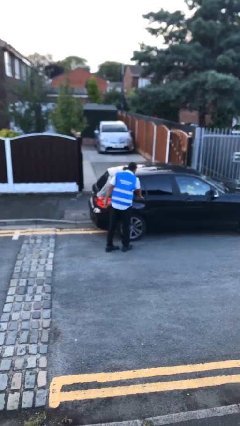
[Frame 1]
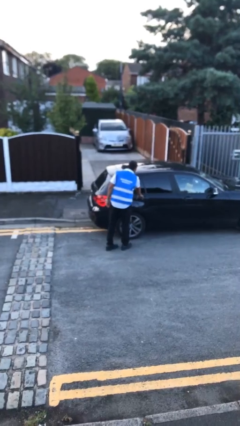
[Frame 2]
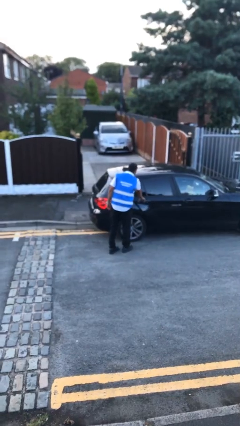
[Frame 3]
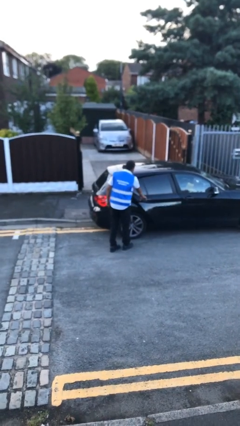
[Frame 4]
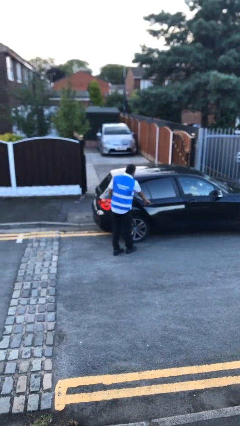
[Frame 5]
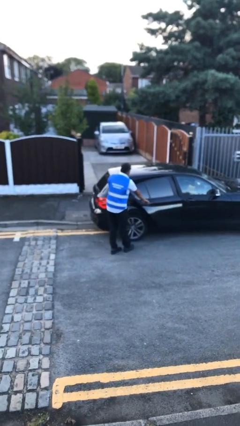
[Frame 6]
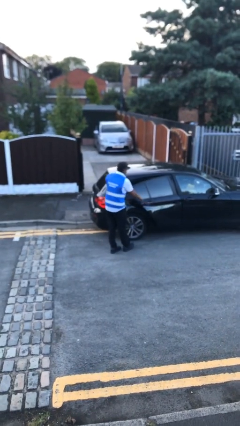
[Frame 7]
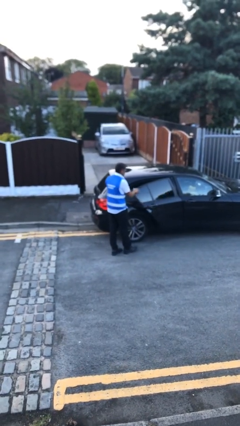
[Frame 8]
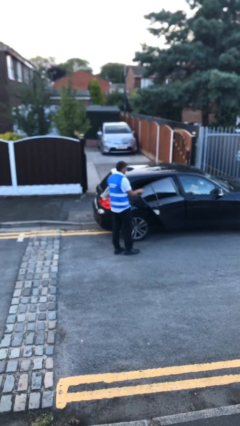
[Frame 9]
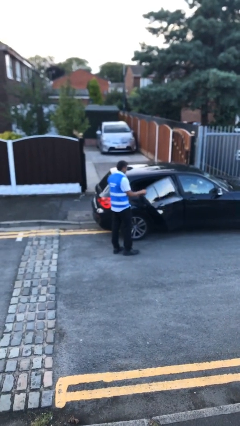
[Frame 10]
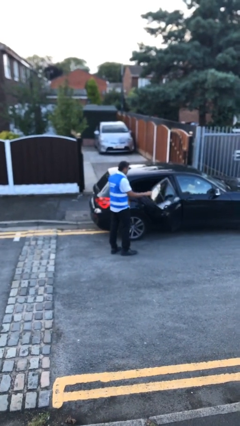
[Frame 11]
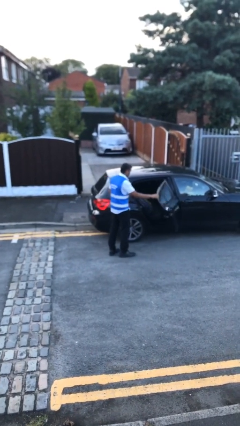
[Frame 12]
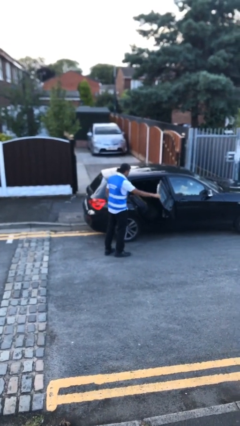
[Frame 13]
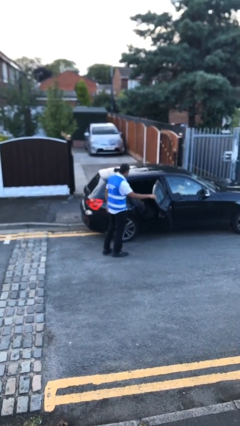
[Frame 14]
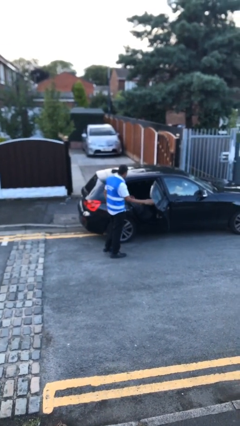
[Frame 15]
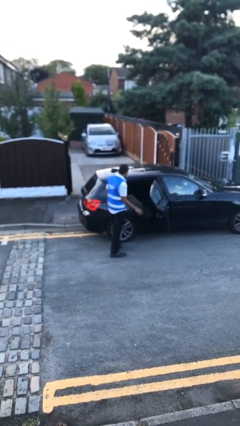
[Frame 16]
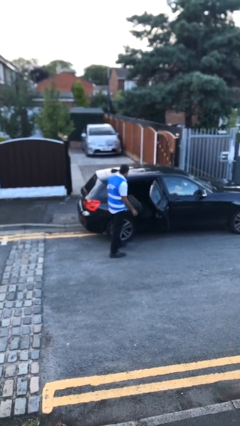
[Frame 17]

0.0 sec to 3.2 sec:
person opens car door

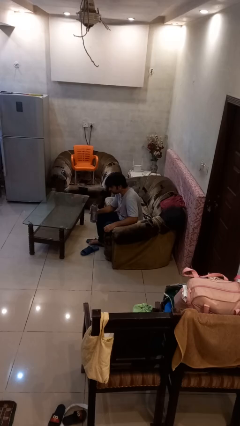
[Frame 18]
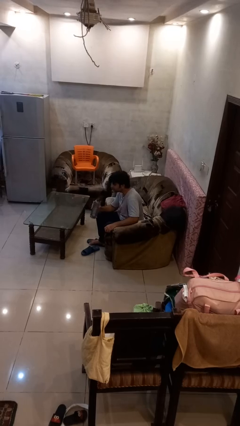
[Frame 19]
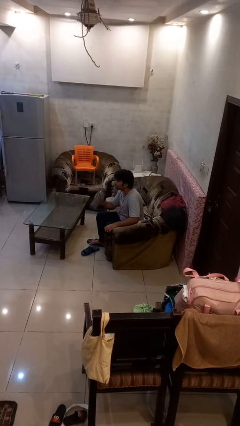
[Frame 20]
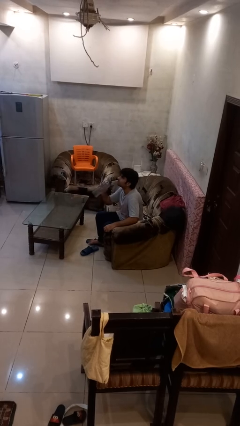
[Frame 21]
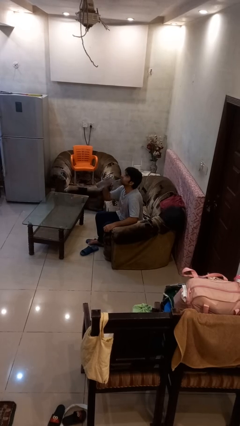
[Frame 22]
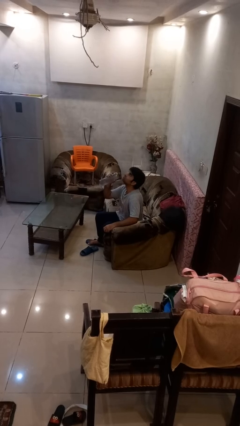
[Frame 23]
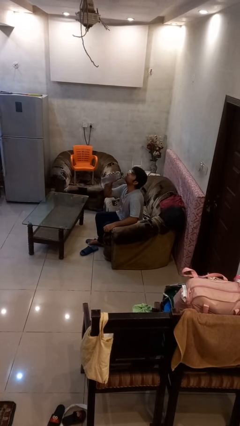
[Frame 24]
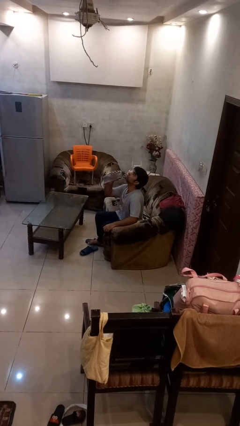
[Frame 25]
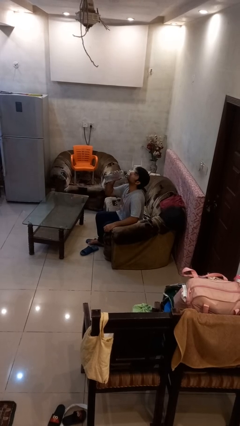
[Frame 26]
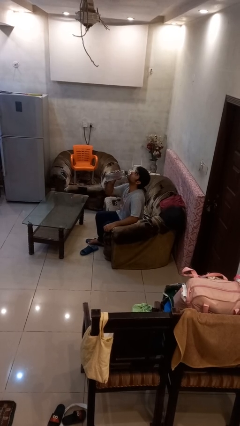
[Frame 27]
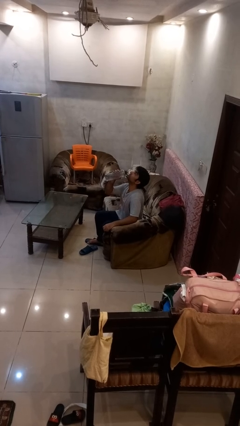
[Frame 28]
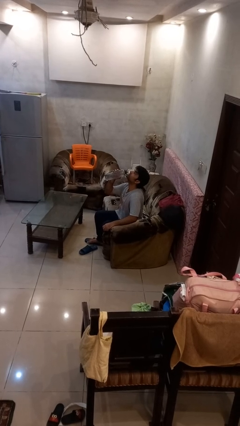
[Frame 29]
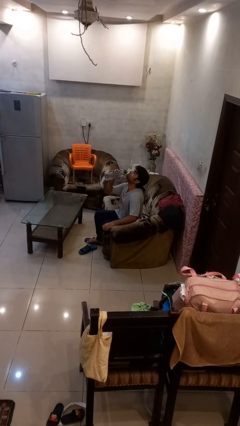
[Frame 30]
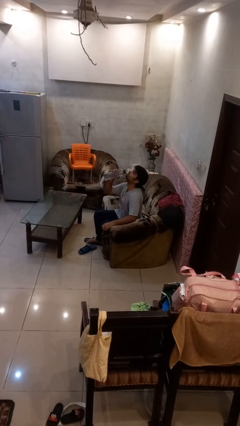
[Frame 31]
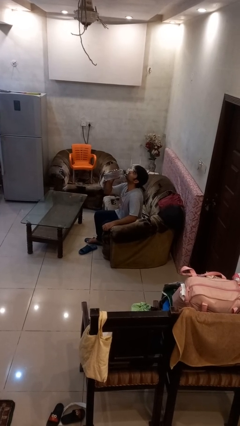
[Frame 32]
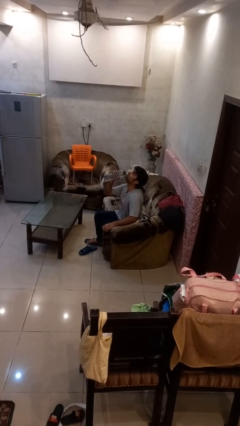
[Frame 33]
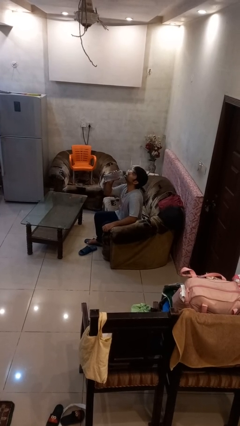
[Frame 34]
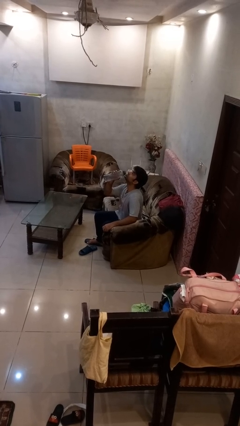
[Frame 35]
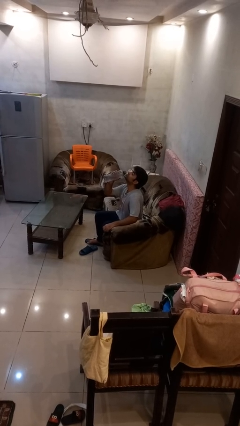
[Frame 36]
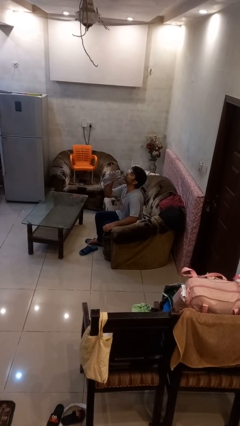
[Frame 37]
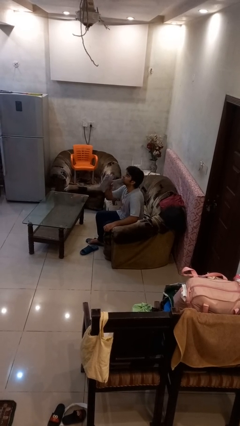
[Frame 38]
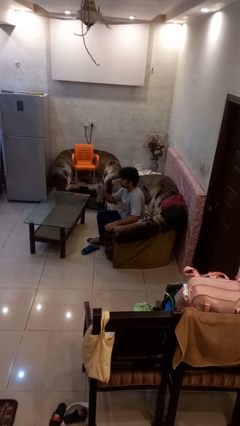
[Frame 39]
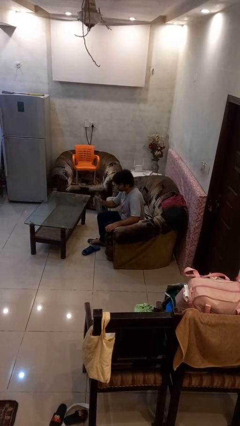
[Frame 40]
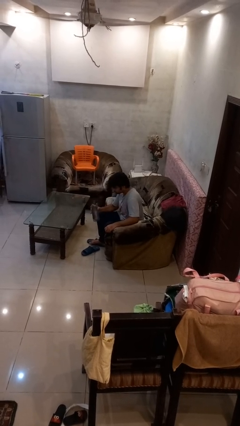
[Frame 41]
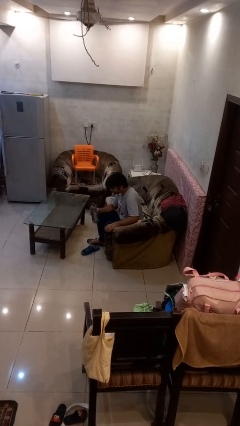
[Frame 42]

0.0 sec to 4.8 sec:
person drinks from bottle

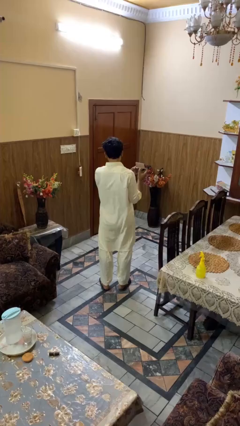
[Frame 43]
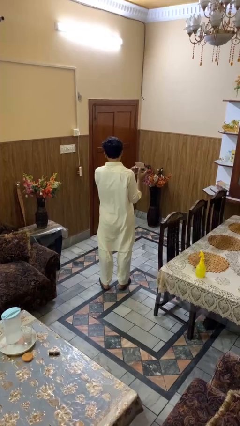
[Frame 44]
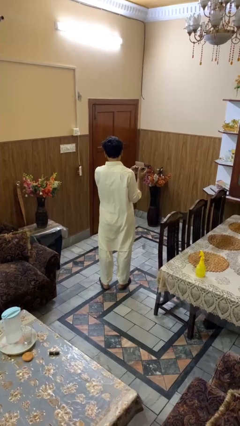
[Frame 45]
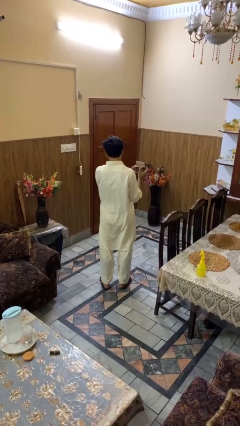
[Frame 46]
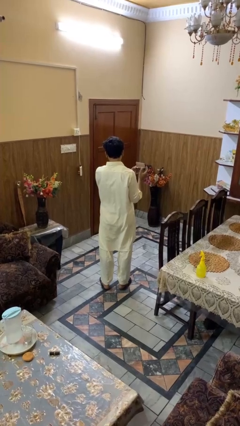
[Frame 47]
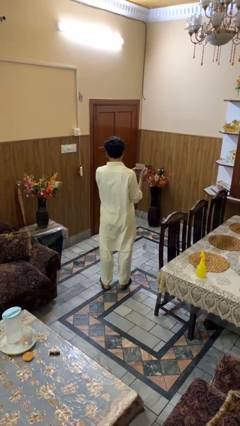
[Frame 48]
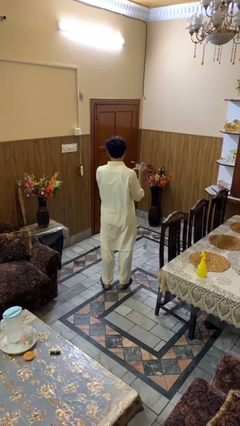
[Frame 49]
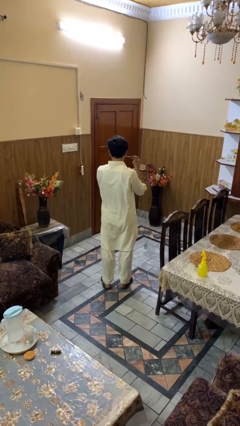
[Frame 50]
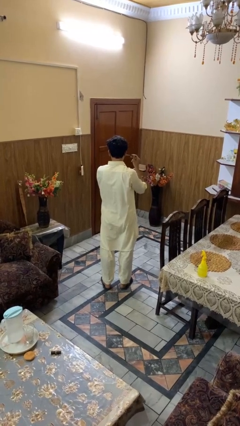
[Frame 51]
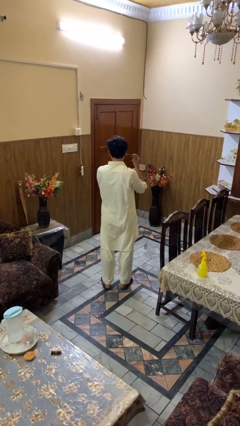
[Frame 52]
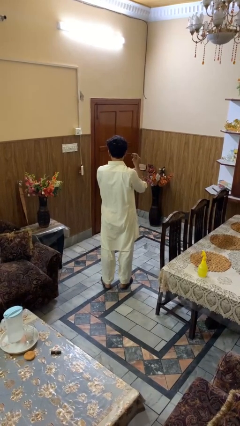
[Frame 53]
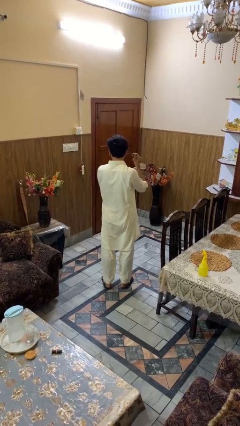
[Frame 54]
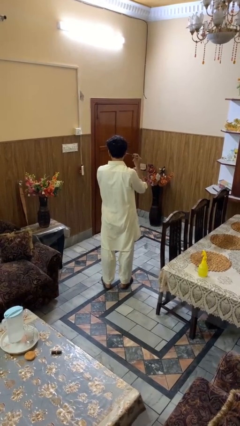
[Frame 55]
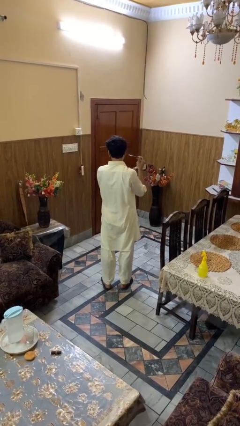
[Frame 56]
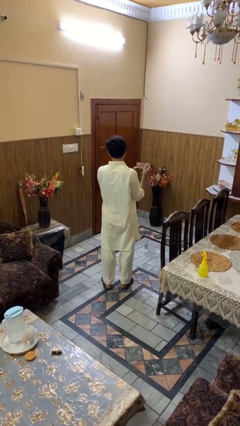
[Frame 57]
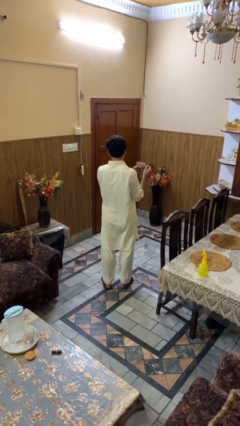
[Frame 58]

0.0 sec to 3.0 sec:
person applies eye makeup

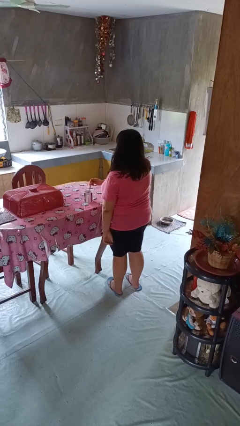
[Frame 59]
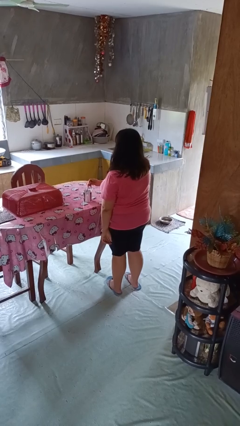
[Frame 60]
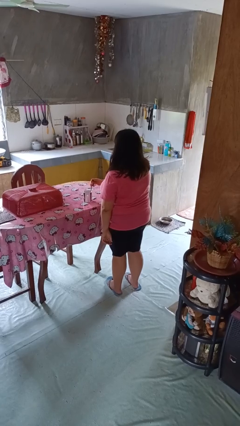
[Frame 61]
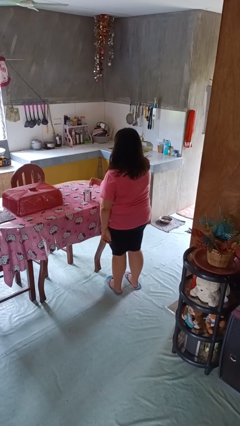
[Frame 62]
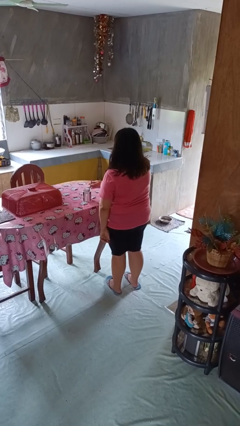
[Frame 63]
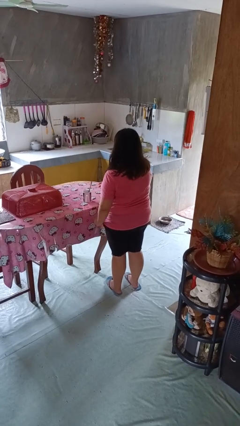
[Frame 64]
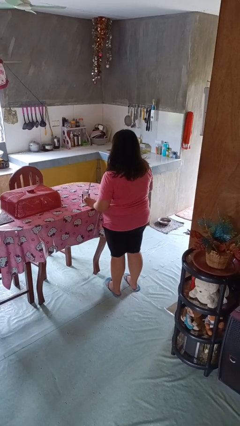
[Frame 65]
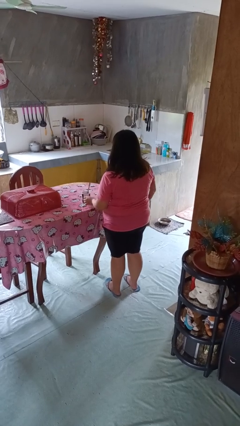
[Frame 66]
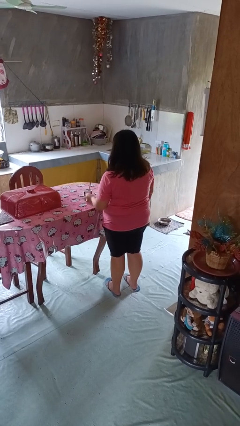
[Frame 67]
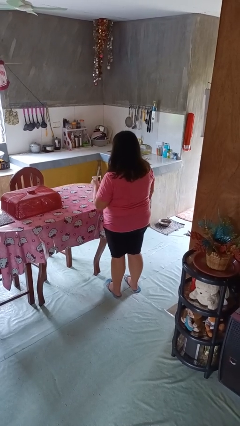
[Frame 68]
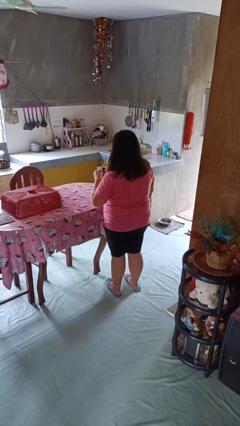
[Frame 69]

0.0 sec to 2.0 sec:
person stirs mug

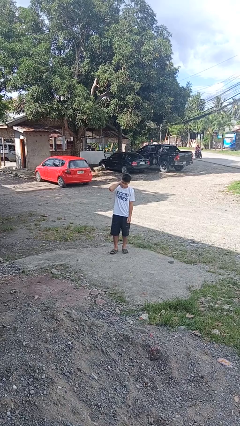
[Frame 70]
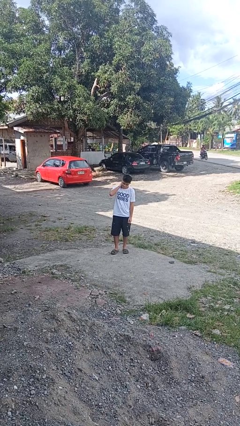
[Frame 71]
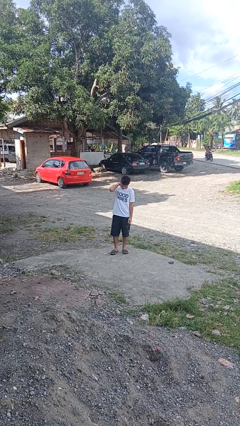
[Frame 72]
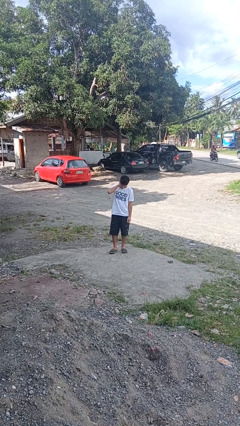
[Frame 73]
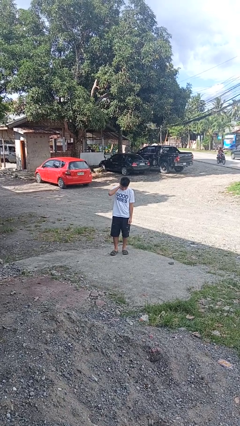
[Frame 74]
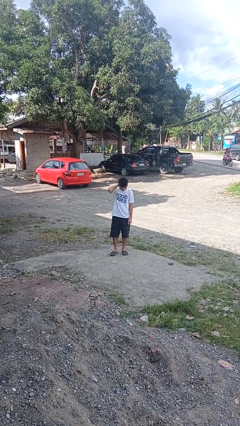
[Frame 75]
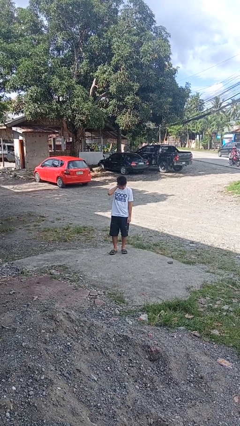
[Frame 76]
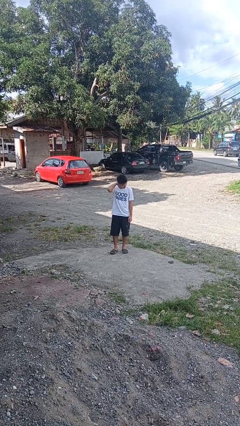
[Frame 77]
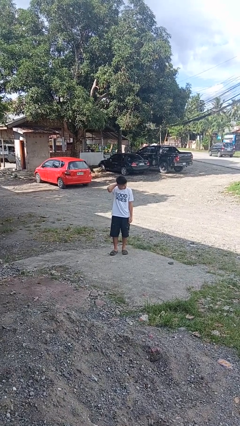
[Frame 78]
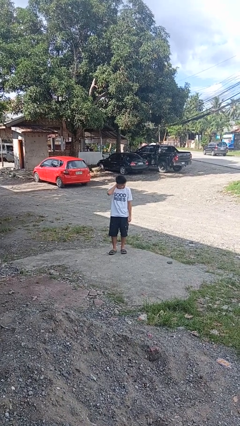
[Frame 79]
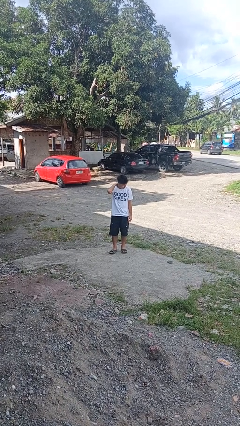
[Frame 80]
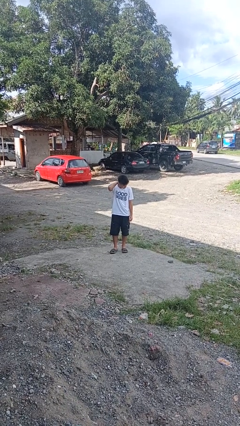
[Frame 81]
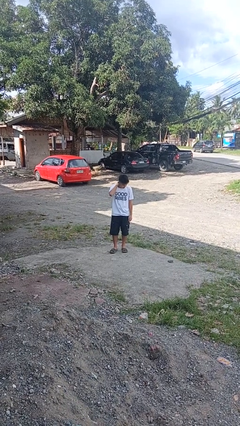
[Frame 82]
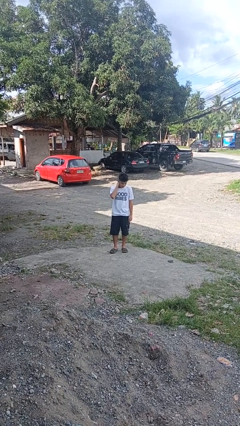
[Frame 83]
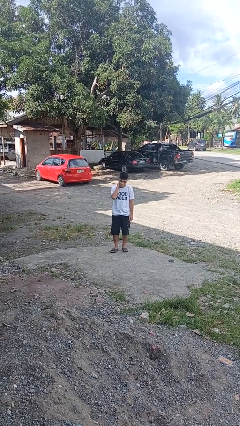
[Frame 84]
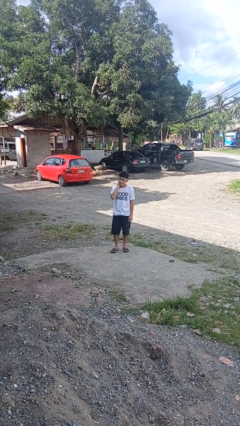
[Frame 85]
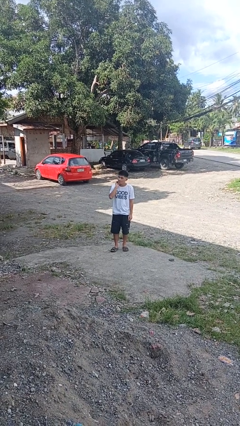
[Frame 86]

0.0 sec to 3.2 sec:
person rubs neck

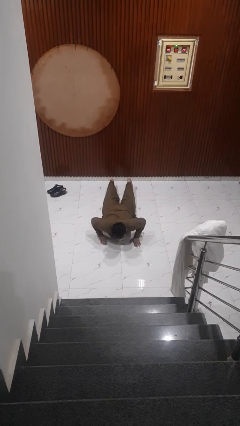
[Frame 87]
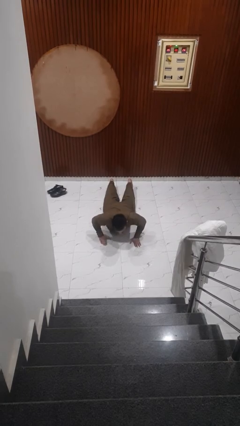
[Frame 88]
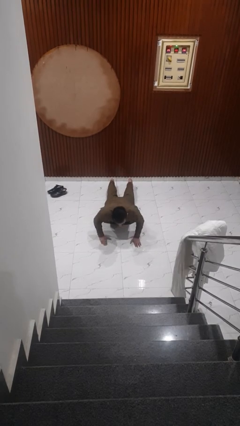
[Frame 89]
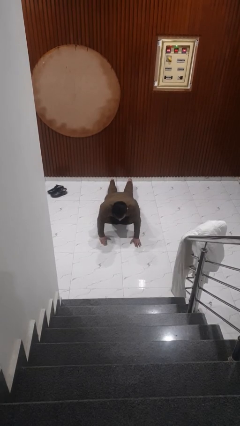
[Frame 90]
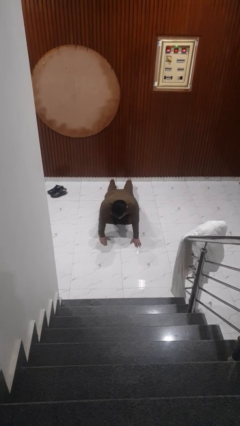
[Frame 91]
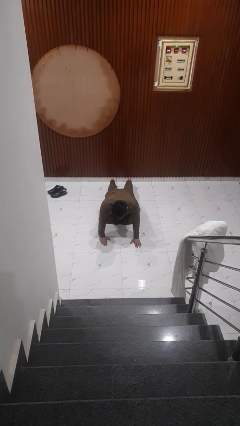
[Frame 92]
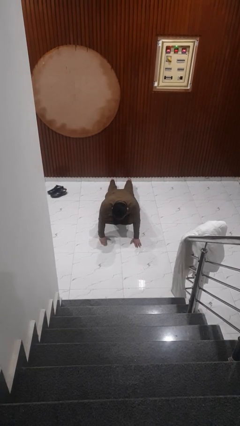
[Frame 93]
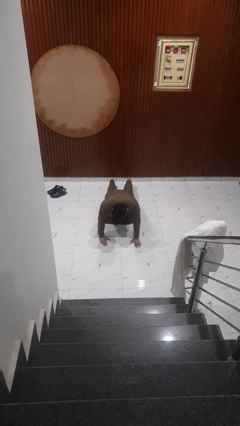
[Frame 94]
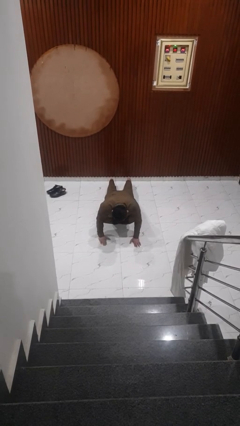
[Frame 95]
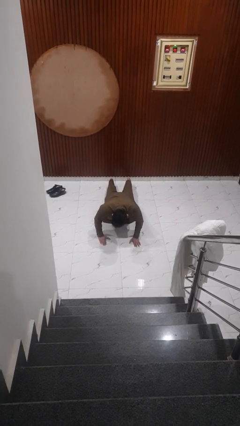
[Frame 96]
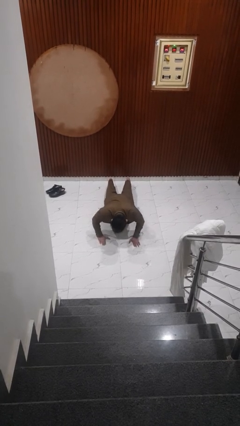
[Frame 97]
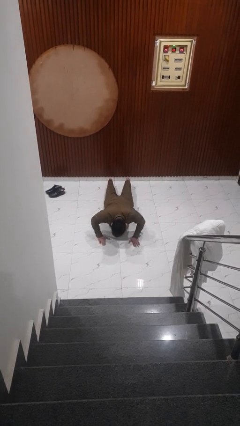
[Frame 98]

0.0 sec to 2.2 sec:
person exercises with pushup
